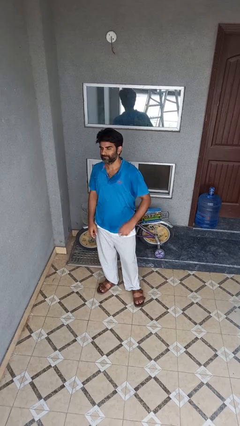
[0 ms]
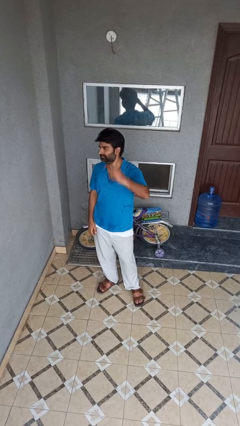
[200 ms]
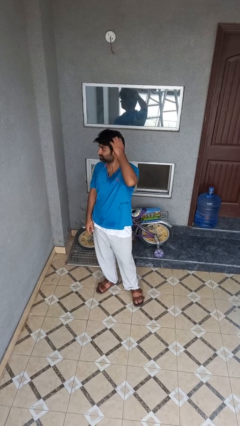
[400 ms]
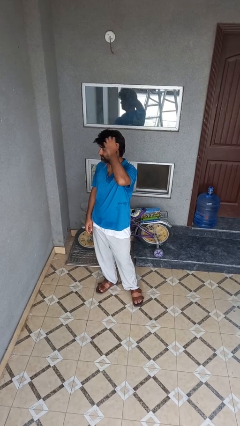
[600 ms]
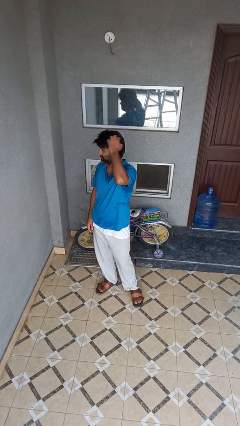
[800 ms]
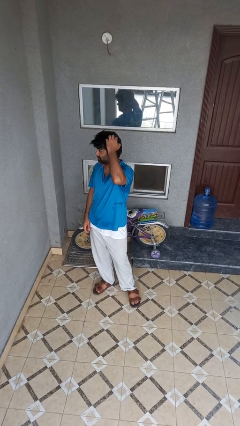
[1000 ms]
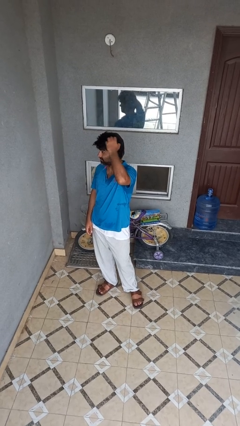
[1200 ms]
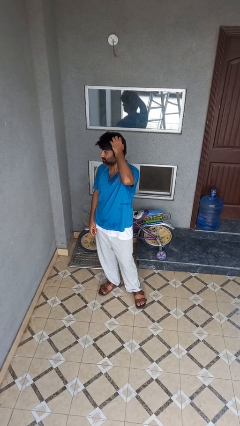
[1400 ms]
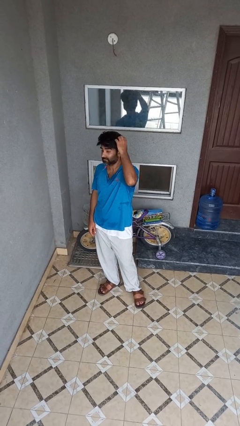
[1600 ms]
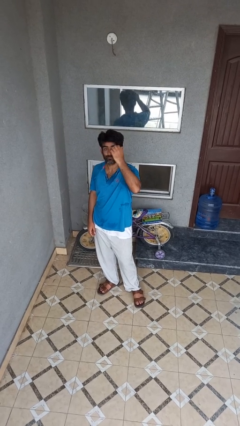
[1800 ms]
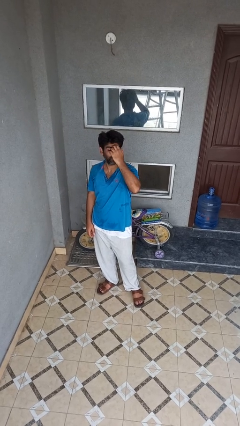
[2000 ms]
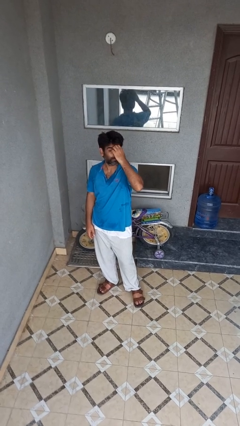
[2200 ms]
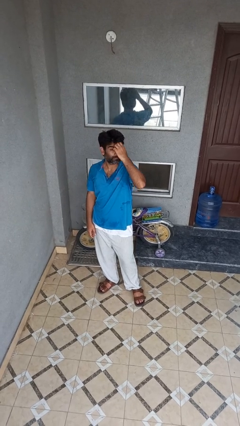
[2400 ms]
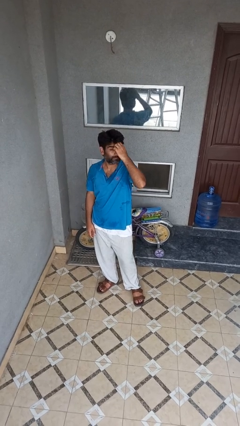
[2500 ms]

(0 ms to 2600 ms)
person scratches face

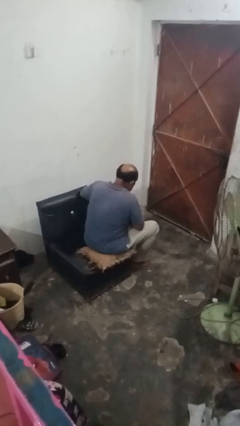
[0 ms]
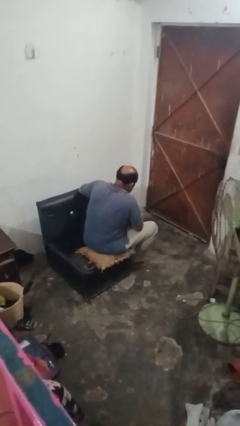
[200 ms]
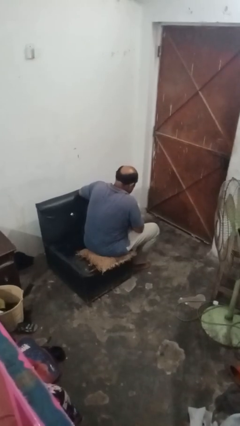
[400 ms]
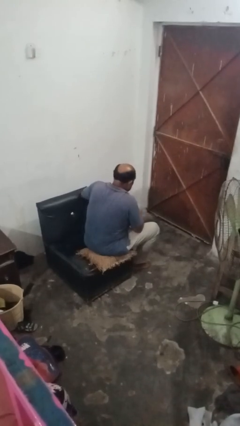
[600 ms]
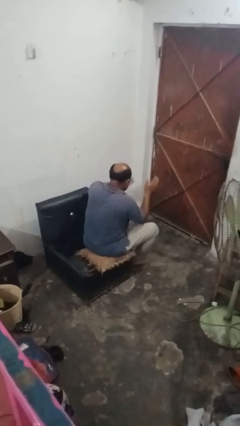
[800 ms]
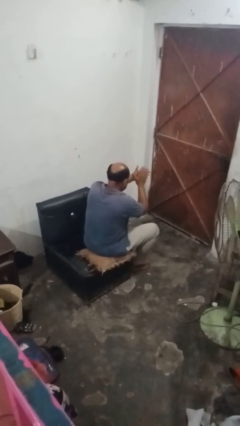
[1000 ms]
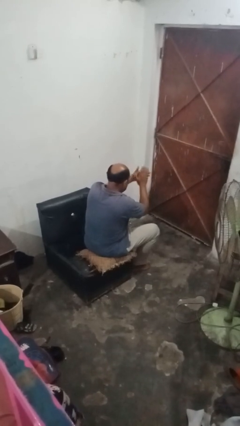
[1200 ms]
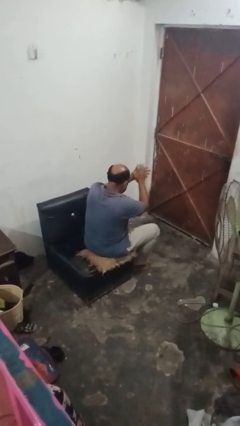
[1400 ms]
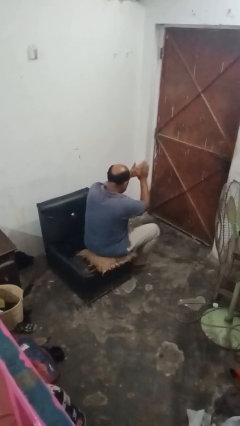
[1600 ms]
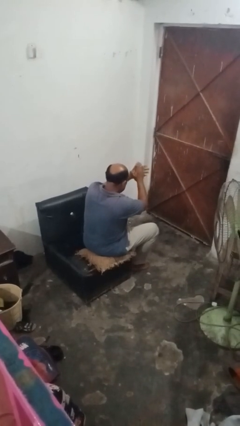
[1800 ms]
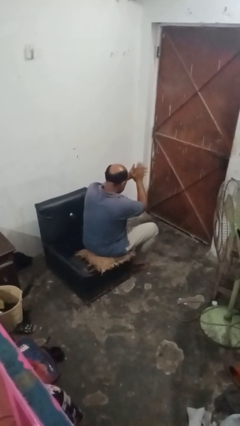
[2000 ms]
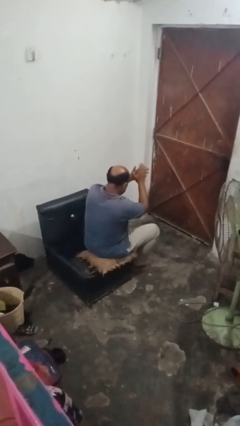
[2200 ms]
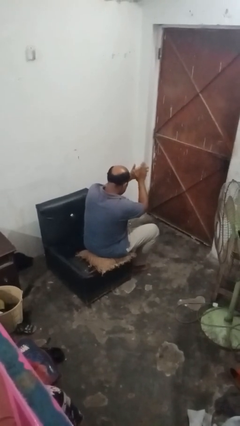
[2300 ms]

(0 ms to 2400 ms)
person claps hands

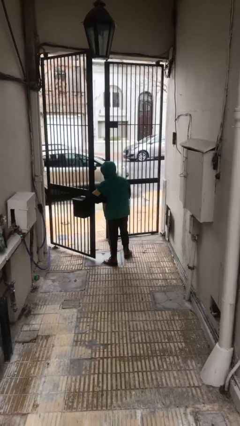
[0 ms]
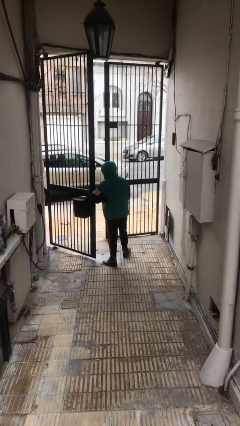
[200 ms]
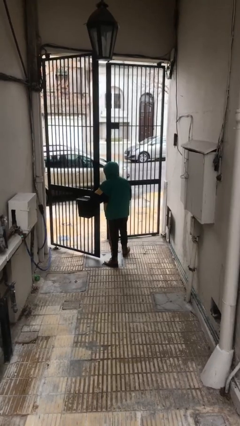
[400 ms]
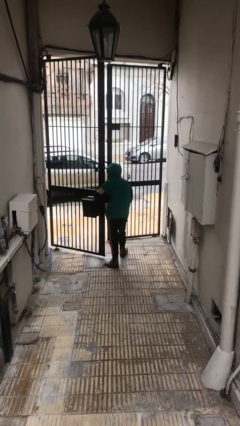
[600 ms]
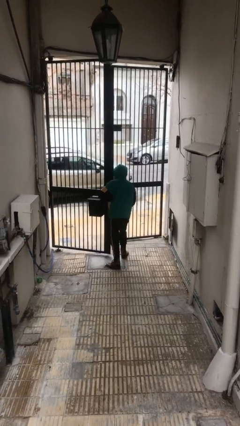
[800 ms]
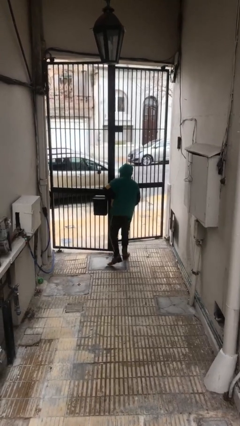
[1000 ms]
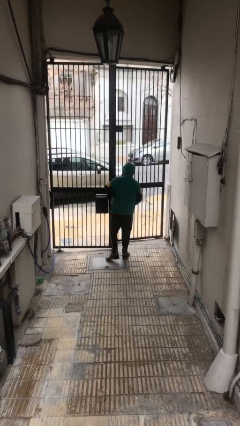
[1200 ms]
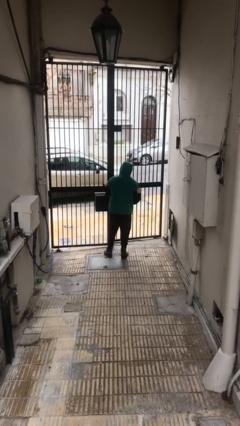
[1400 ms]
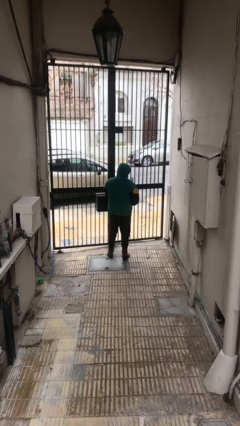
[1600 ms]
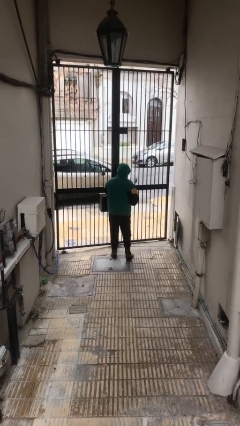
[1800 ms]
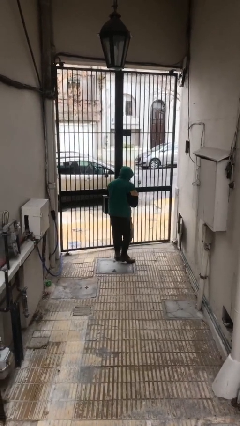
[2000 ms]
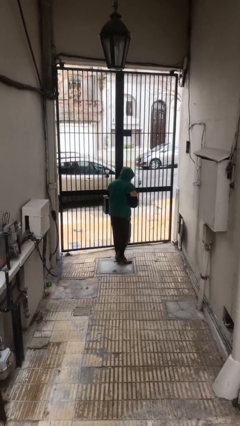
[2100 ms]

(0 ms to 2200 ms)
person closes gate

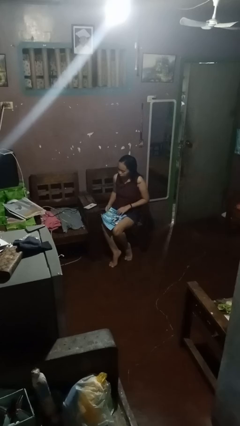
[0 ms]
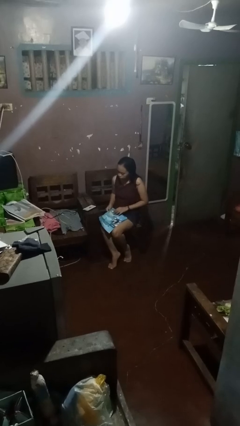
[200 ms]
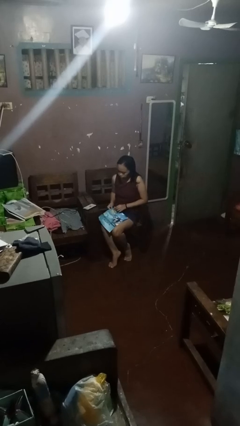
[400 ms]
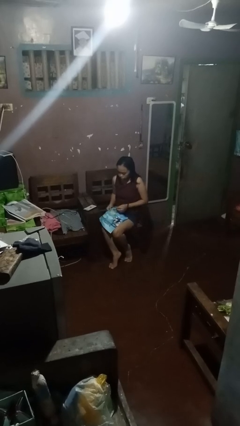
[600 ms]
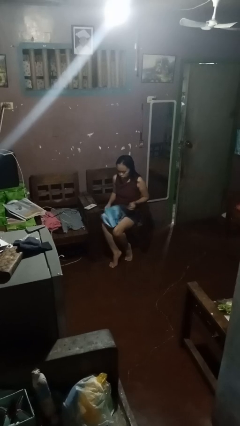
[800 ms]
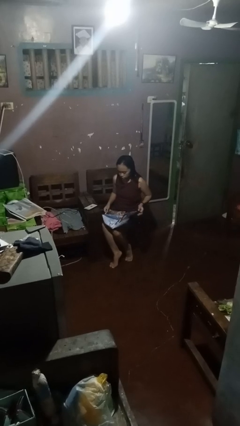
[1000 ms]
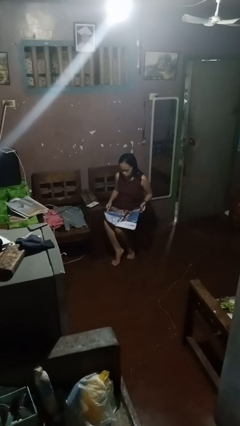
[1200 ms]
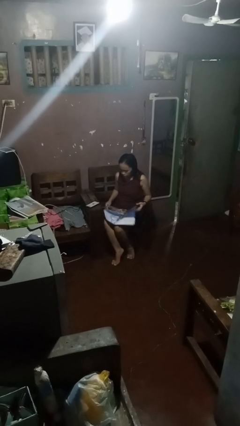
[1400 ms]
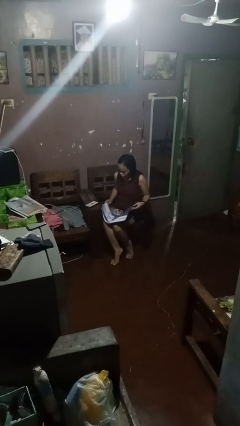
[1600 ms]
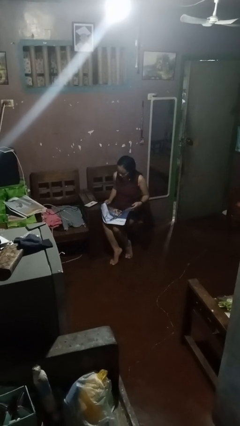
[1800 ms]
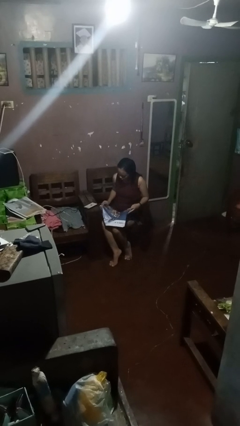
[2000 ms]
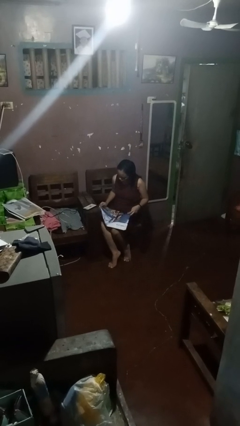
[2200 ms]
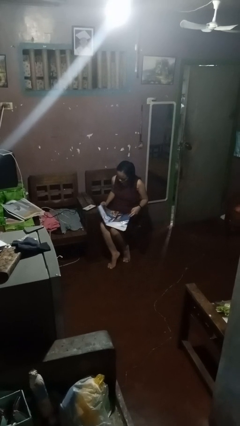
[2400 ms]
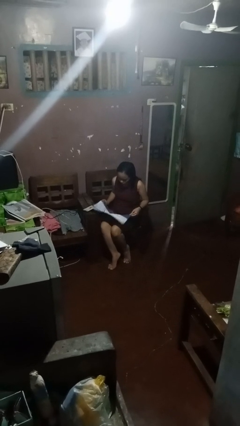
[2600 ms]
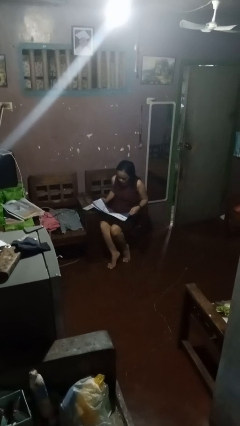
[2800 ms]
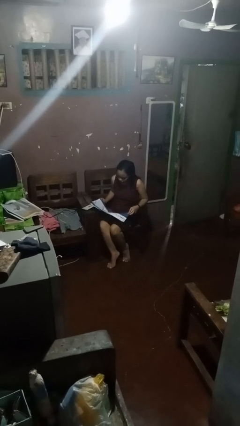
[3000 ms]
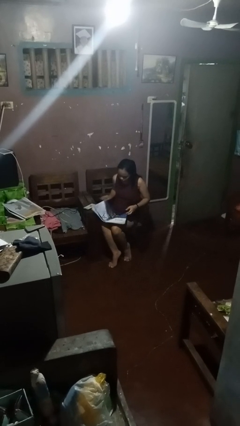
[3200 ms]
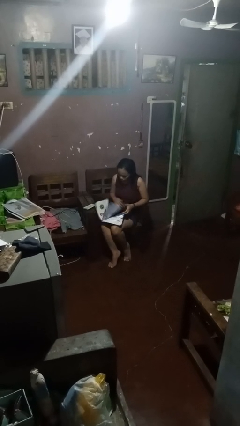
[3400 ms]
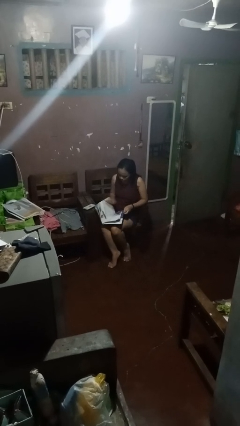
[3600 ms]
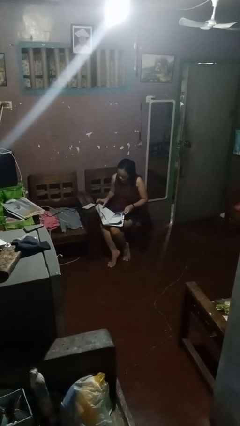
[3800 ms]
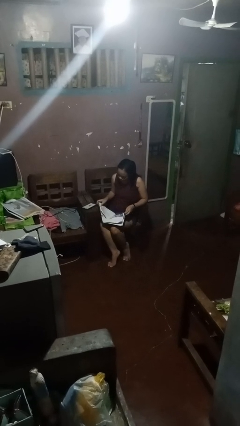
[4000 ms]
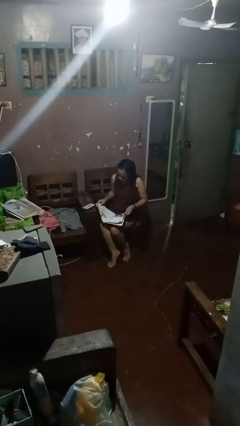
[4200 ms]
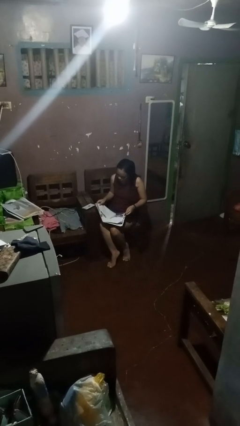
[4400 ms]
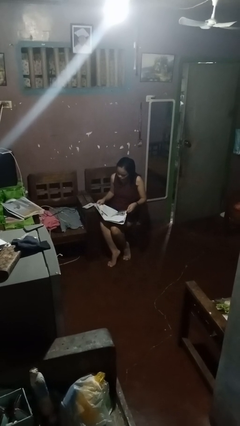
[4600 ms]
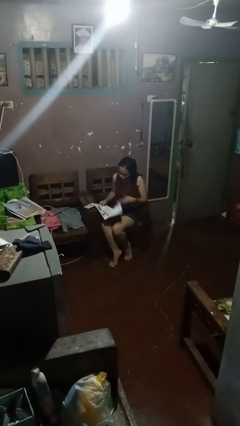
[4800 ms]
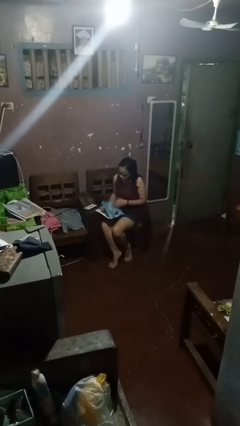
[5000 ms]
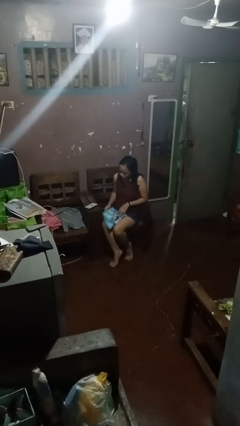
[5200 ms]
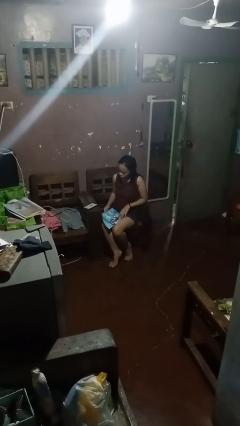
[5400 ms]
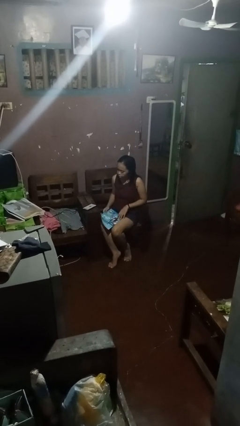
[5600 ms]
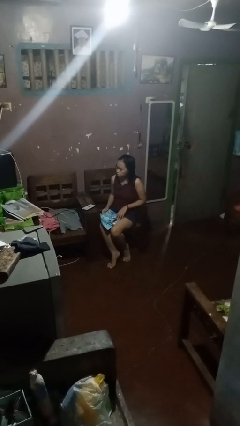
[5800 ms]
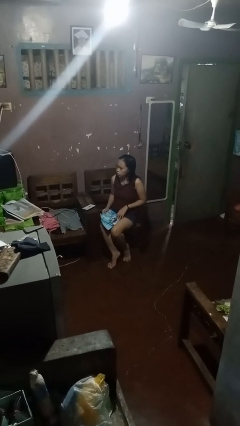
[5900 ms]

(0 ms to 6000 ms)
person reads magazine

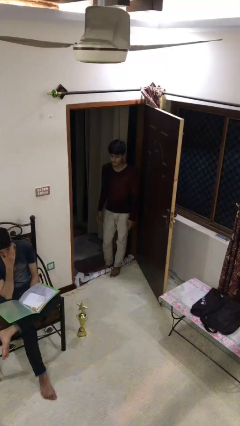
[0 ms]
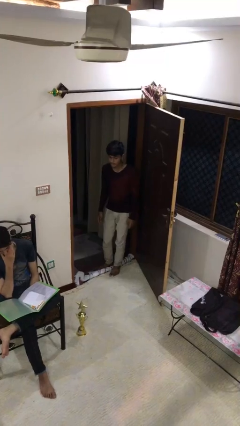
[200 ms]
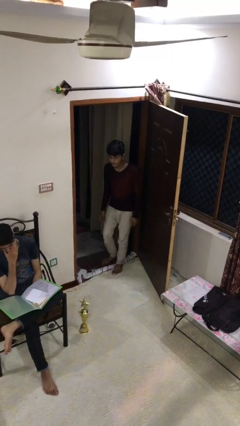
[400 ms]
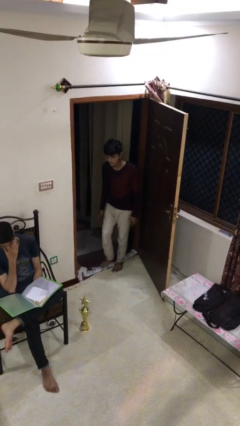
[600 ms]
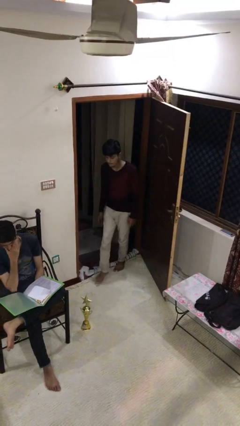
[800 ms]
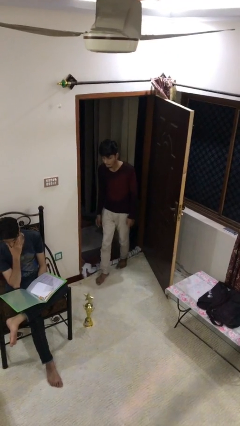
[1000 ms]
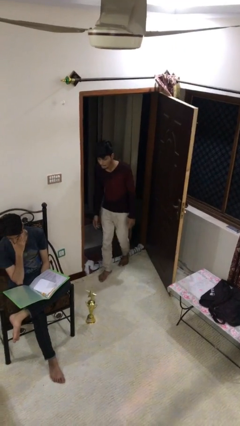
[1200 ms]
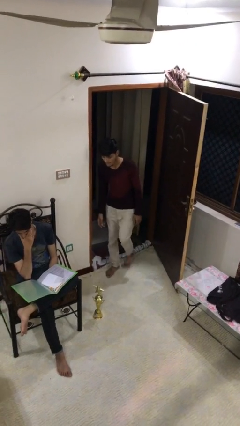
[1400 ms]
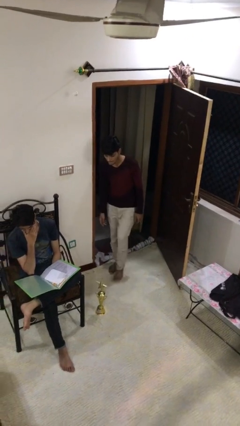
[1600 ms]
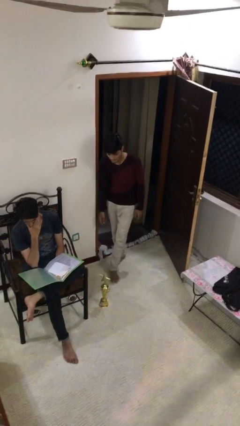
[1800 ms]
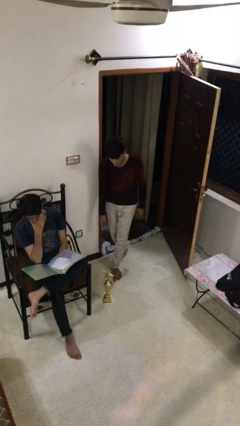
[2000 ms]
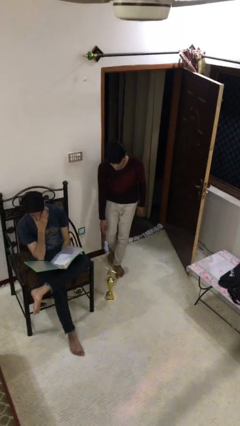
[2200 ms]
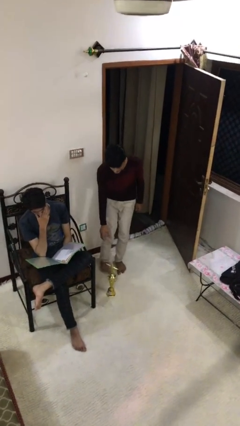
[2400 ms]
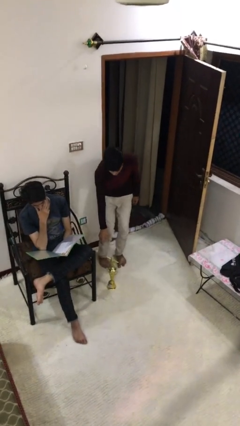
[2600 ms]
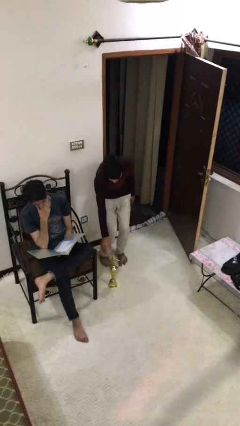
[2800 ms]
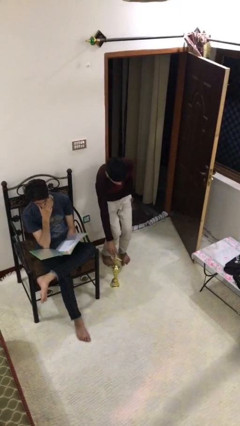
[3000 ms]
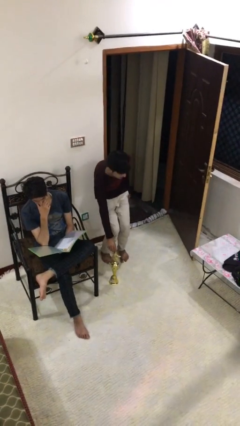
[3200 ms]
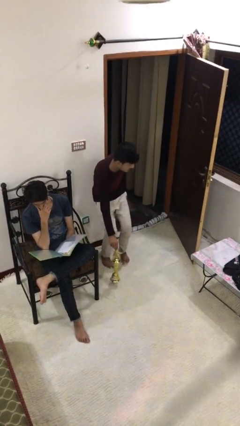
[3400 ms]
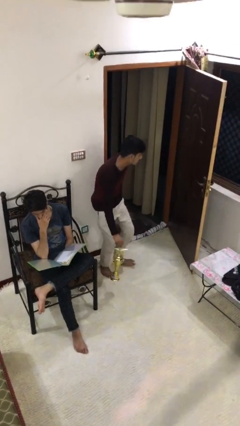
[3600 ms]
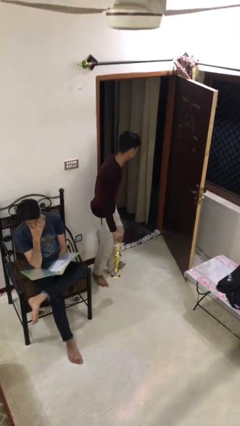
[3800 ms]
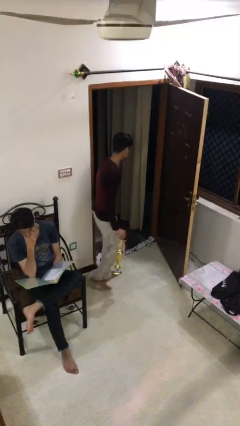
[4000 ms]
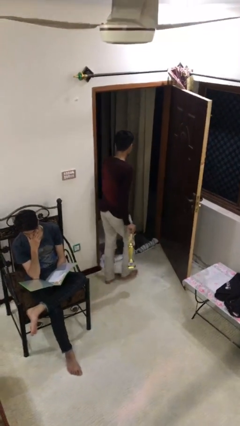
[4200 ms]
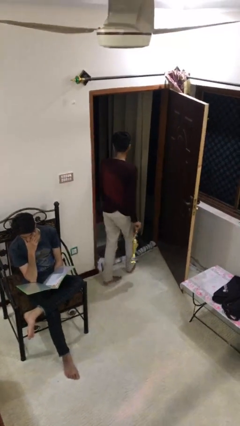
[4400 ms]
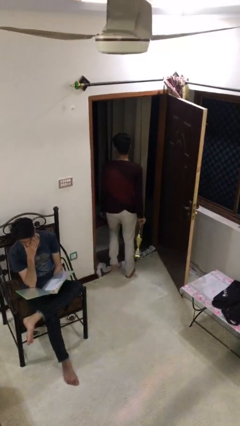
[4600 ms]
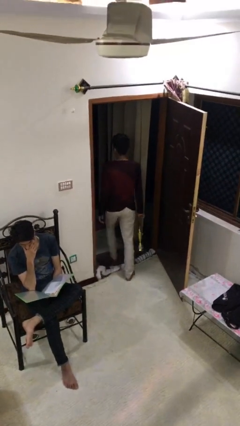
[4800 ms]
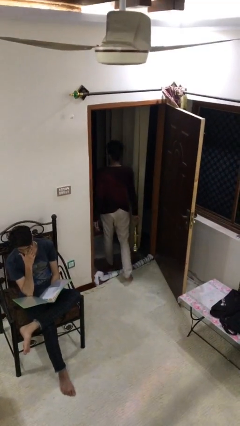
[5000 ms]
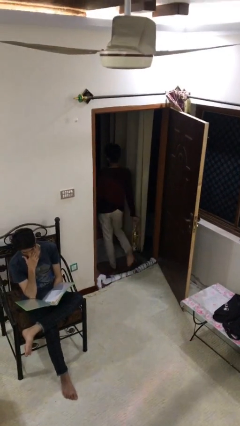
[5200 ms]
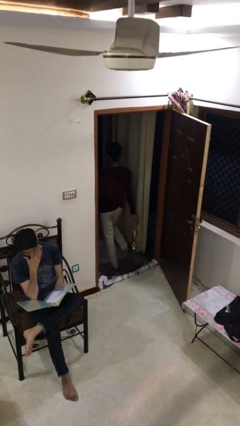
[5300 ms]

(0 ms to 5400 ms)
person steals object from person
